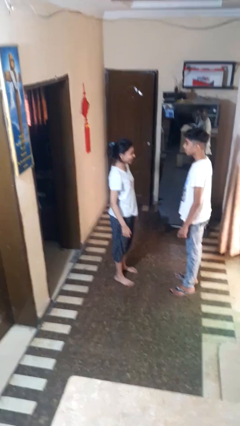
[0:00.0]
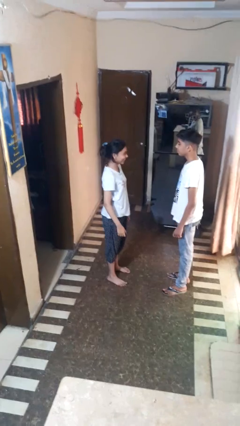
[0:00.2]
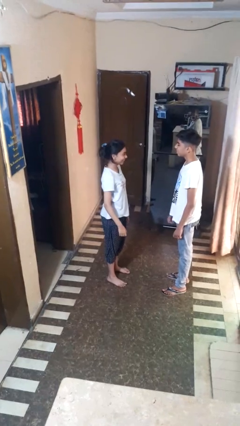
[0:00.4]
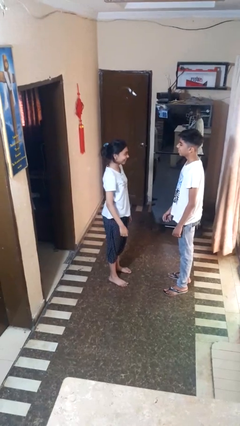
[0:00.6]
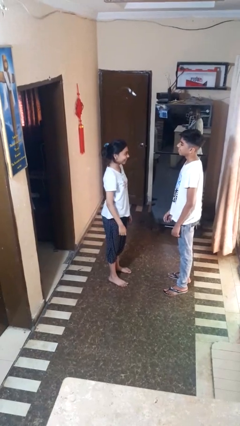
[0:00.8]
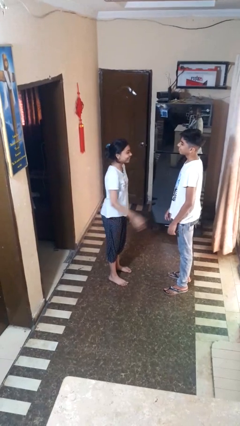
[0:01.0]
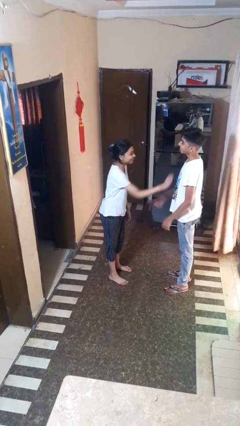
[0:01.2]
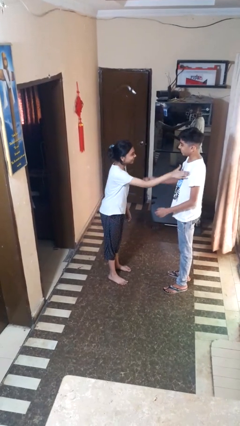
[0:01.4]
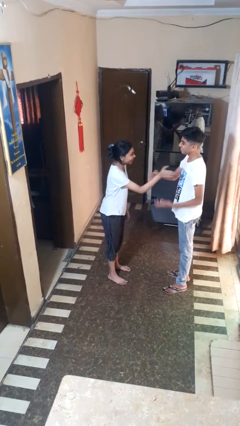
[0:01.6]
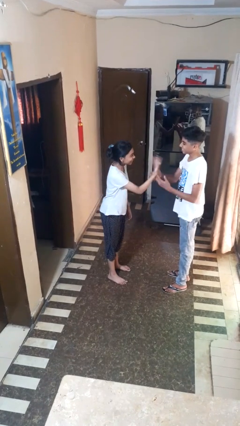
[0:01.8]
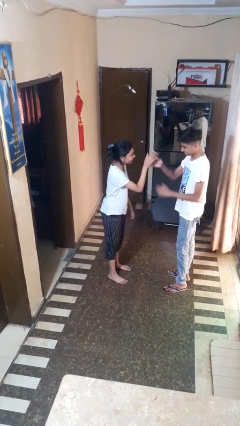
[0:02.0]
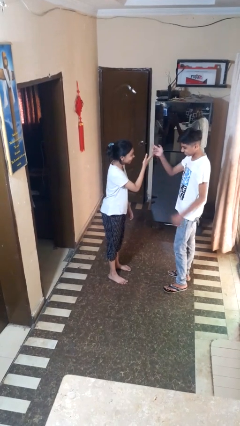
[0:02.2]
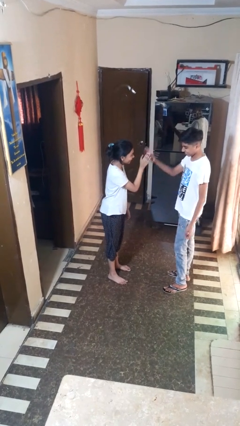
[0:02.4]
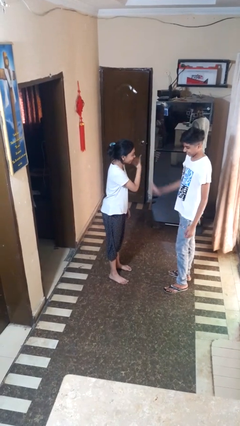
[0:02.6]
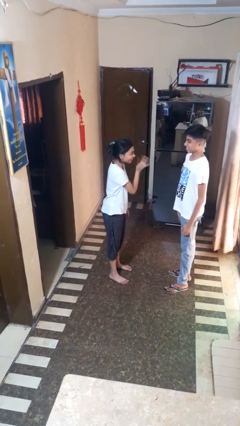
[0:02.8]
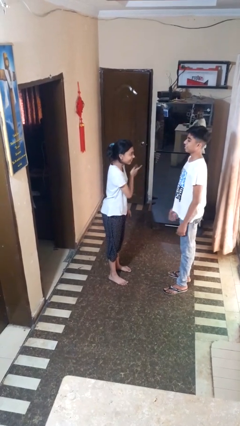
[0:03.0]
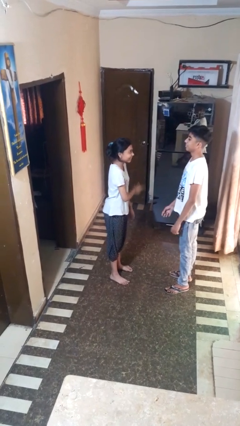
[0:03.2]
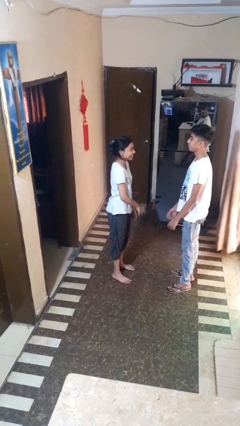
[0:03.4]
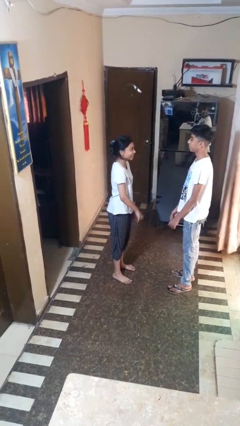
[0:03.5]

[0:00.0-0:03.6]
person shoves person

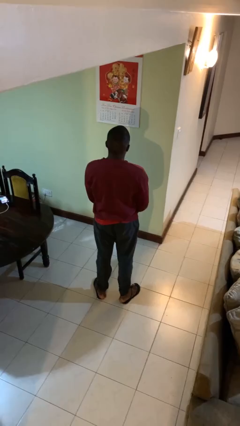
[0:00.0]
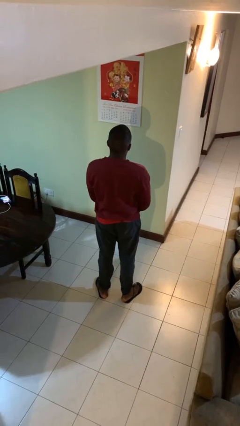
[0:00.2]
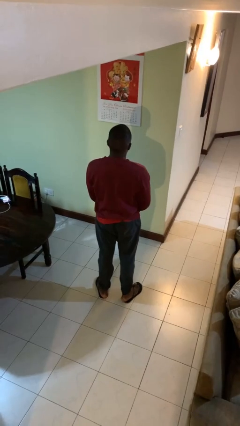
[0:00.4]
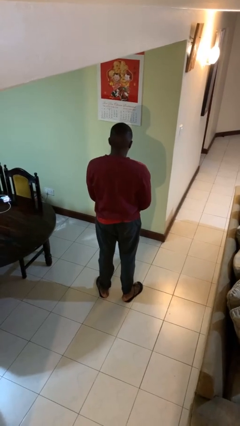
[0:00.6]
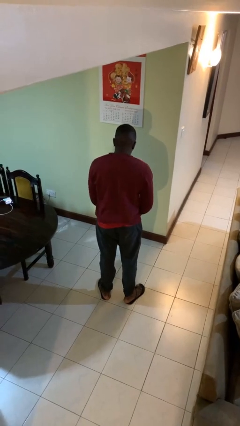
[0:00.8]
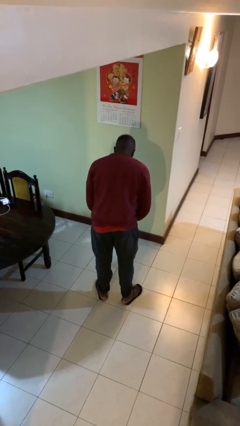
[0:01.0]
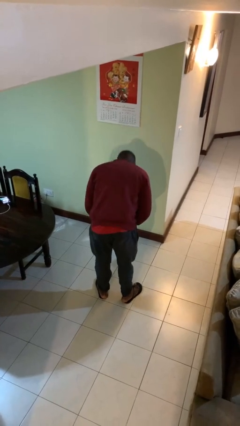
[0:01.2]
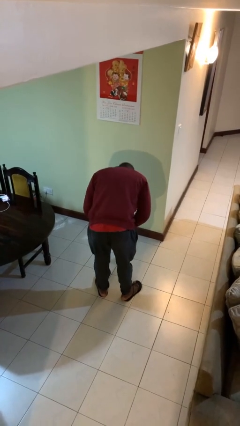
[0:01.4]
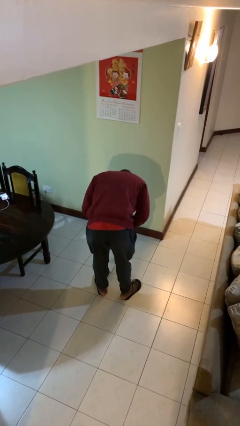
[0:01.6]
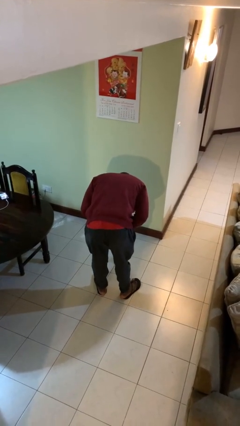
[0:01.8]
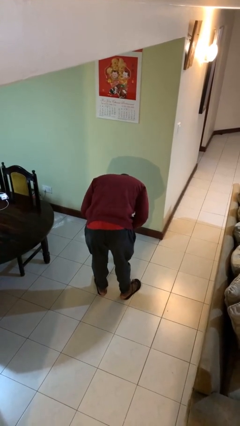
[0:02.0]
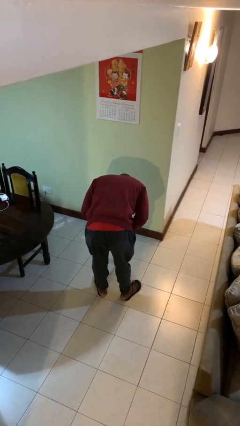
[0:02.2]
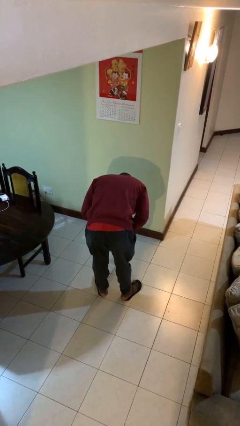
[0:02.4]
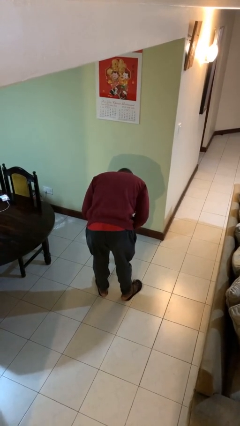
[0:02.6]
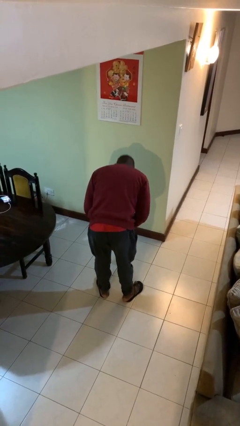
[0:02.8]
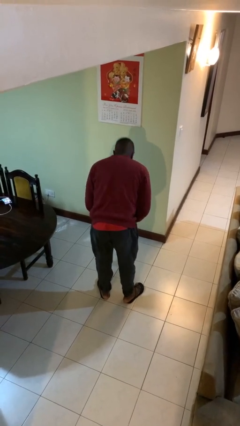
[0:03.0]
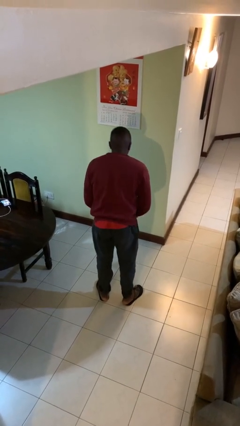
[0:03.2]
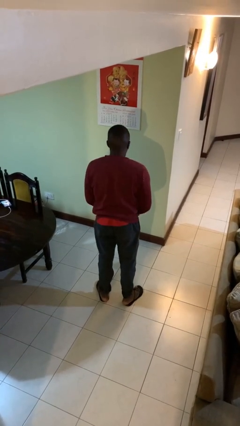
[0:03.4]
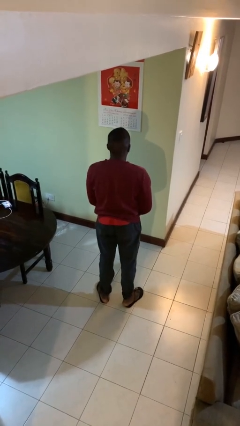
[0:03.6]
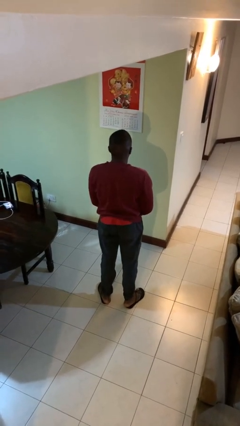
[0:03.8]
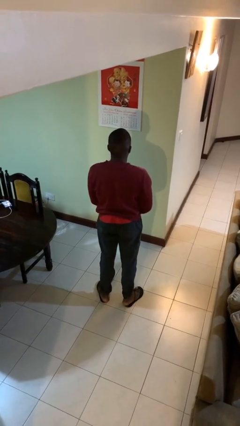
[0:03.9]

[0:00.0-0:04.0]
person bows

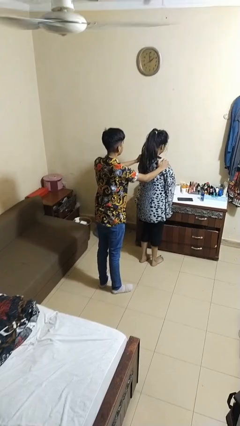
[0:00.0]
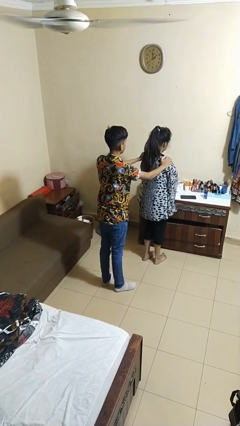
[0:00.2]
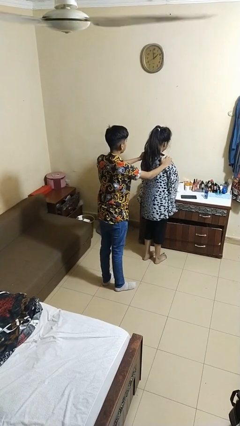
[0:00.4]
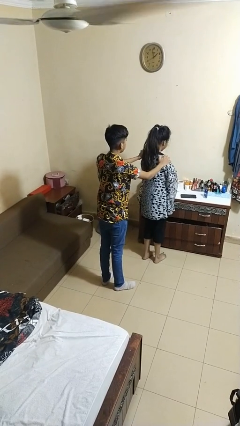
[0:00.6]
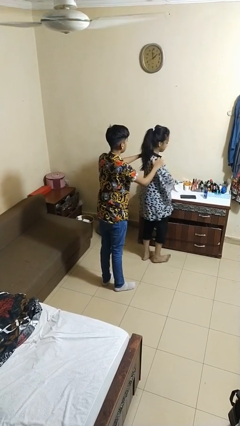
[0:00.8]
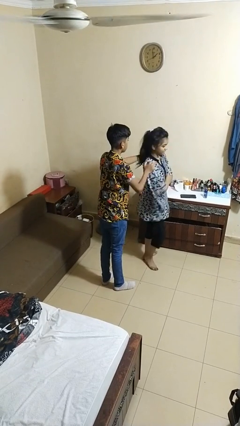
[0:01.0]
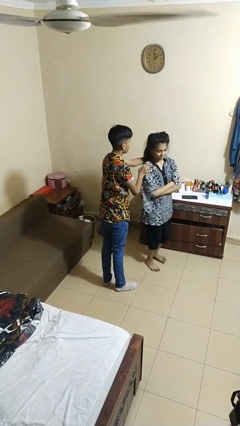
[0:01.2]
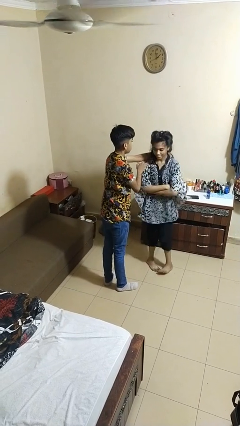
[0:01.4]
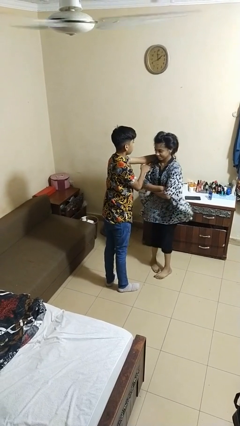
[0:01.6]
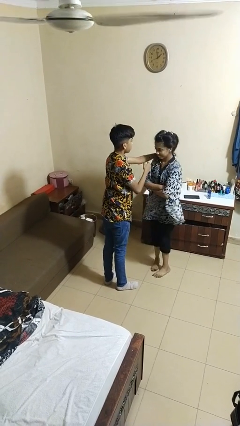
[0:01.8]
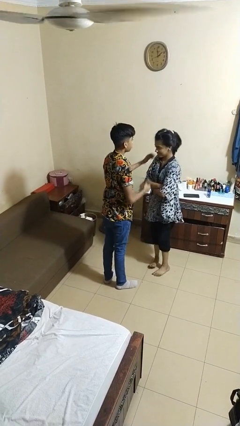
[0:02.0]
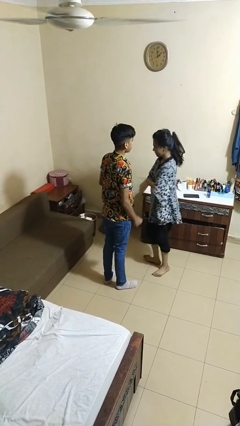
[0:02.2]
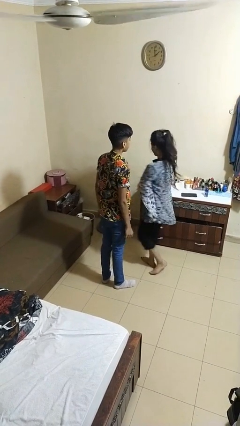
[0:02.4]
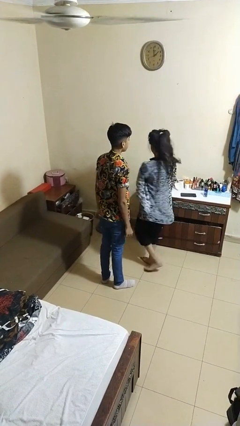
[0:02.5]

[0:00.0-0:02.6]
person spins person around

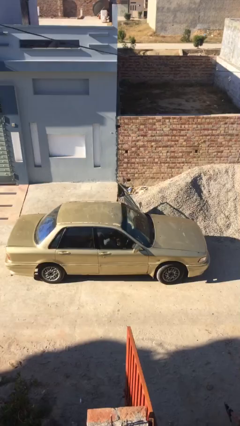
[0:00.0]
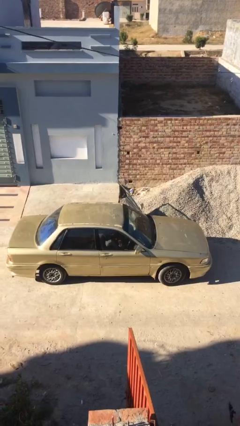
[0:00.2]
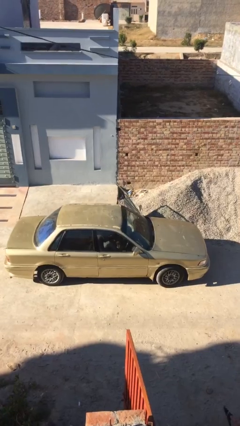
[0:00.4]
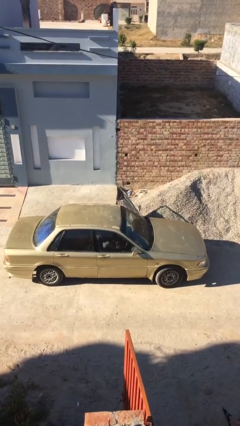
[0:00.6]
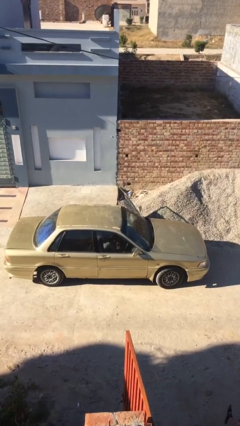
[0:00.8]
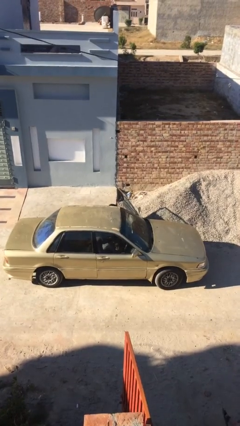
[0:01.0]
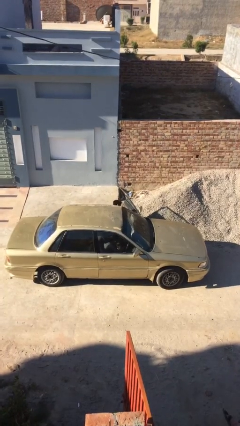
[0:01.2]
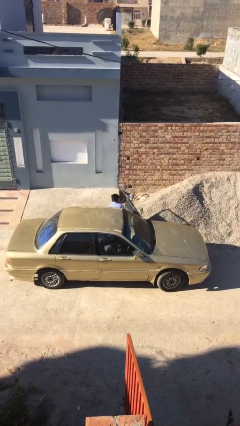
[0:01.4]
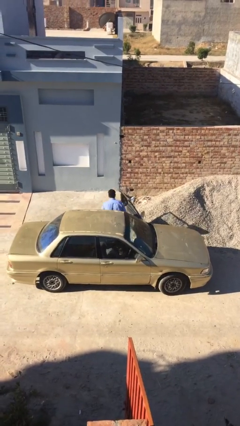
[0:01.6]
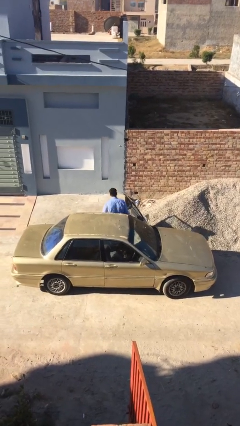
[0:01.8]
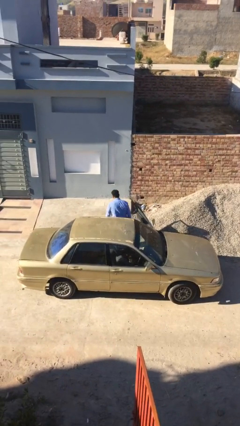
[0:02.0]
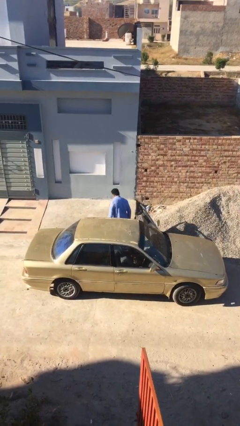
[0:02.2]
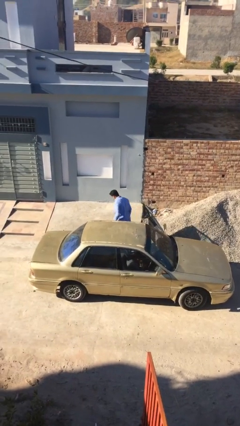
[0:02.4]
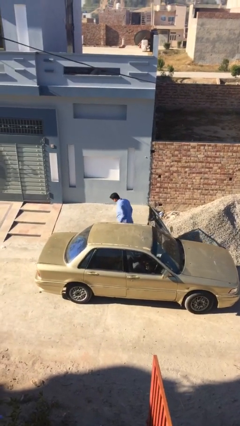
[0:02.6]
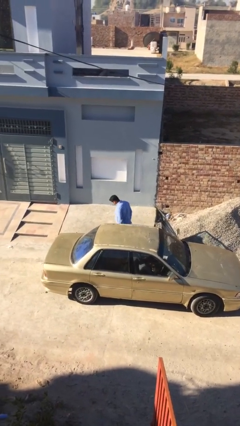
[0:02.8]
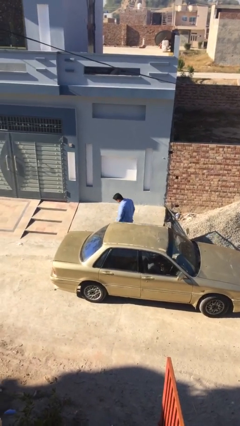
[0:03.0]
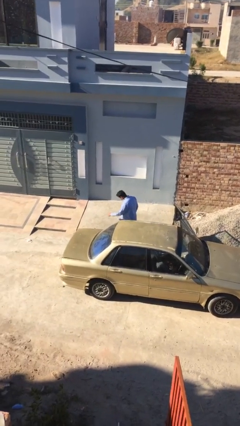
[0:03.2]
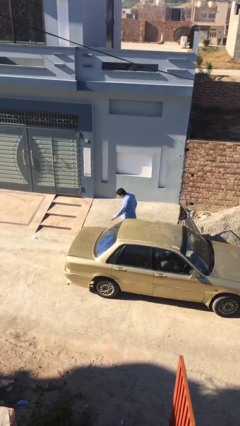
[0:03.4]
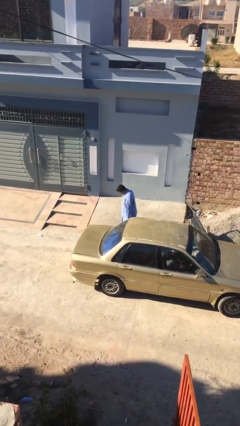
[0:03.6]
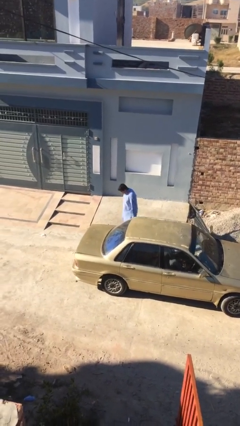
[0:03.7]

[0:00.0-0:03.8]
person exits car

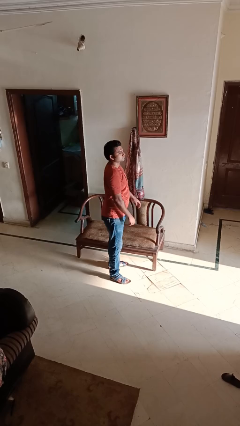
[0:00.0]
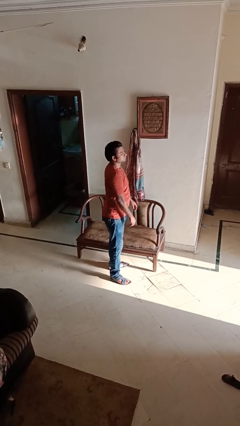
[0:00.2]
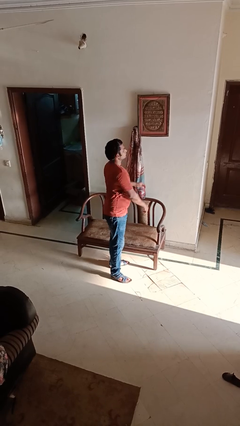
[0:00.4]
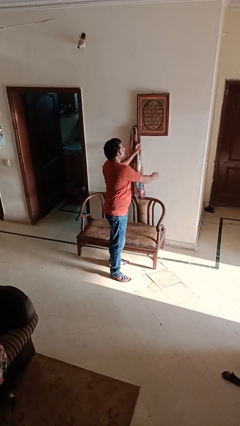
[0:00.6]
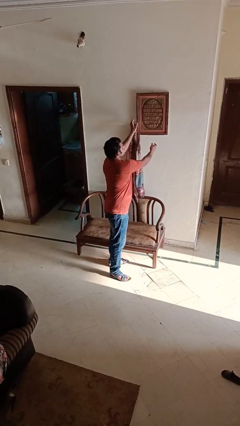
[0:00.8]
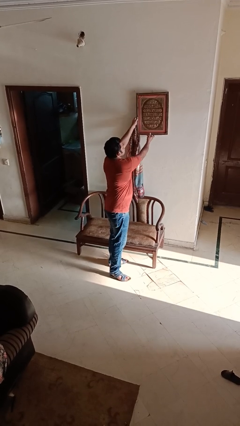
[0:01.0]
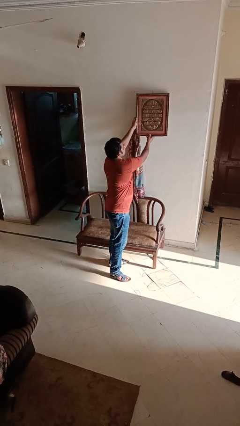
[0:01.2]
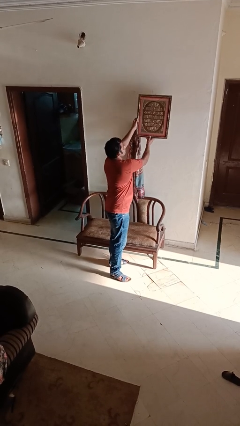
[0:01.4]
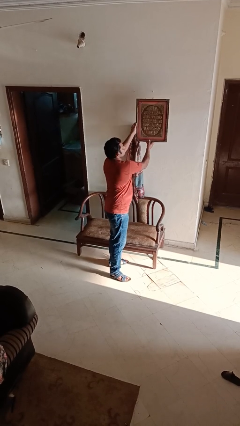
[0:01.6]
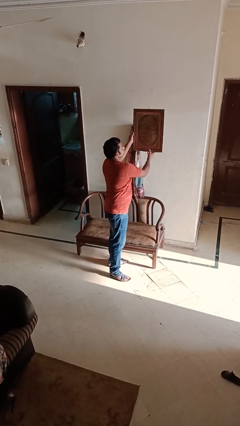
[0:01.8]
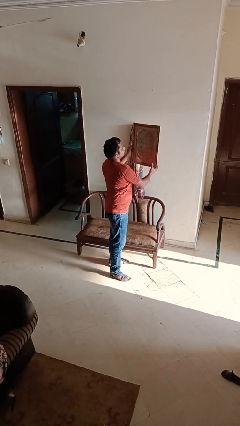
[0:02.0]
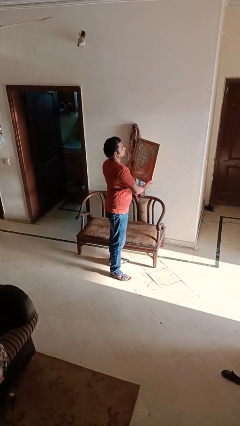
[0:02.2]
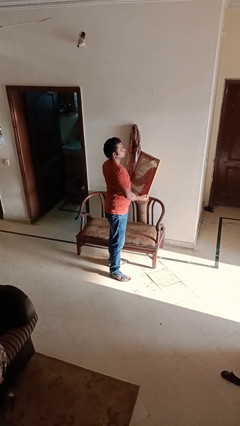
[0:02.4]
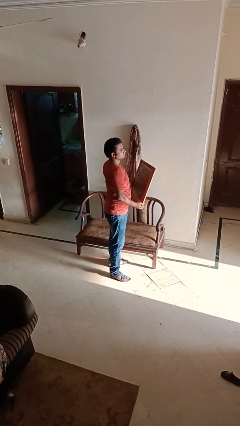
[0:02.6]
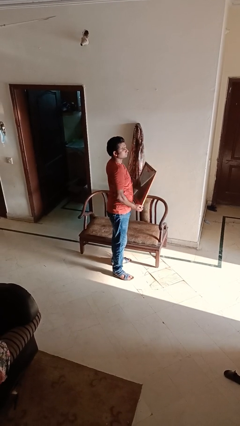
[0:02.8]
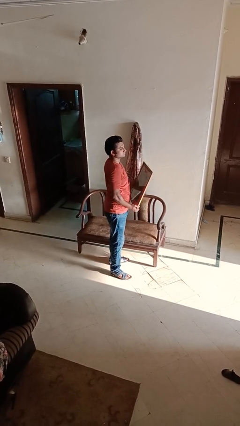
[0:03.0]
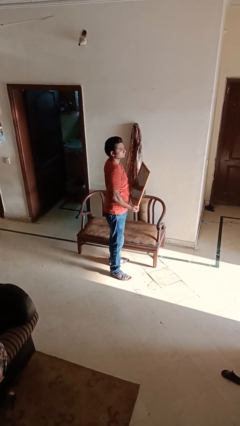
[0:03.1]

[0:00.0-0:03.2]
person takes down picture frame

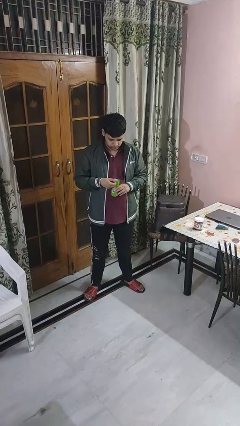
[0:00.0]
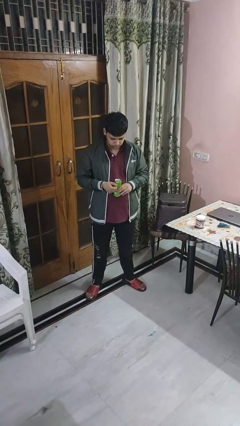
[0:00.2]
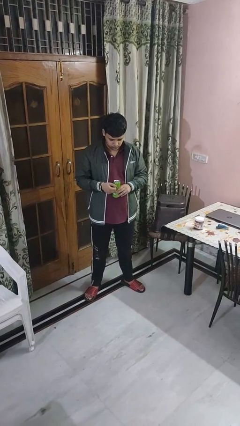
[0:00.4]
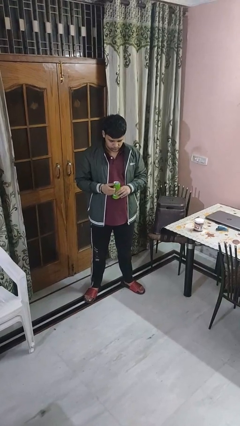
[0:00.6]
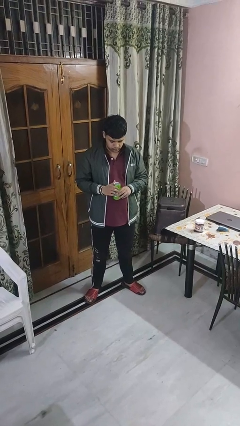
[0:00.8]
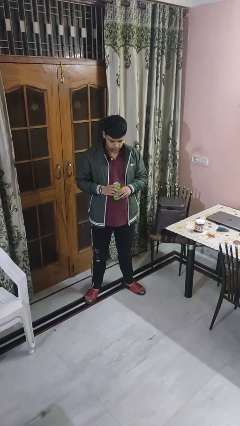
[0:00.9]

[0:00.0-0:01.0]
person opens beverage can
